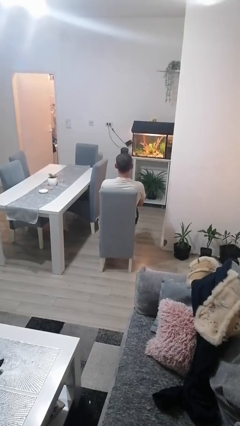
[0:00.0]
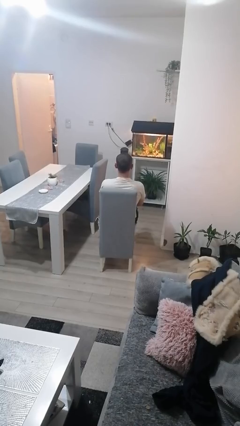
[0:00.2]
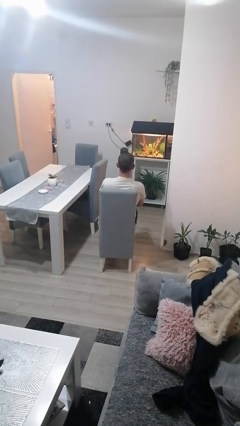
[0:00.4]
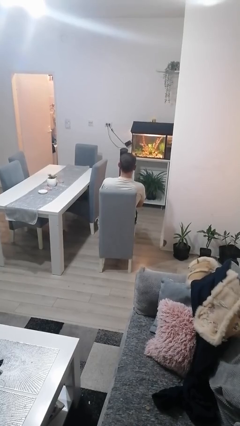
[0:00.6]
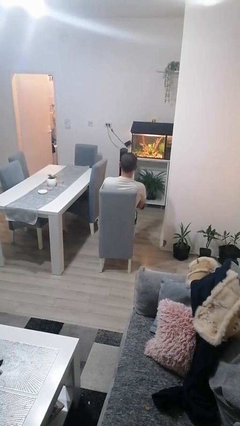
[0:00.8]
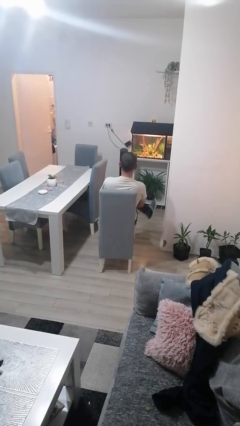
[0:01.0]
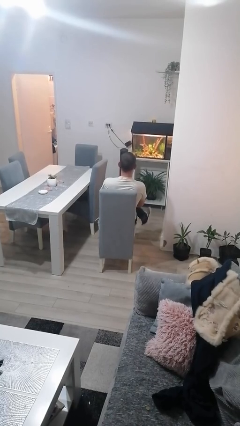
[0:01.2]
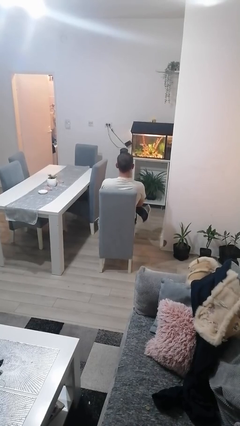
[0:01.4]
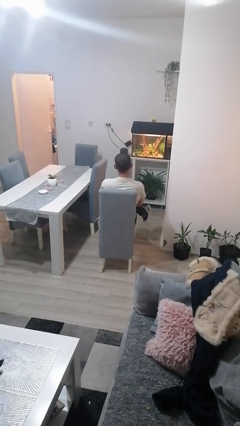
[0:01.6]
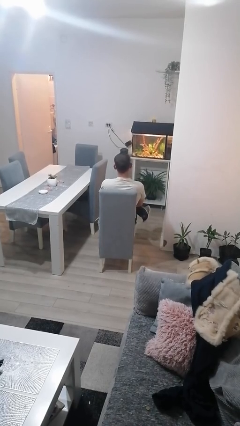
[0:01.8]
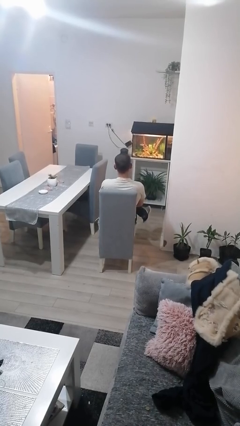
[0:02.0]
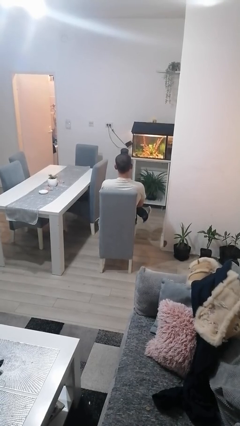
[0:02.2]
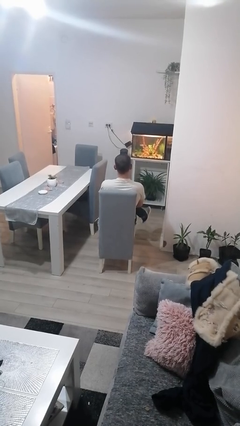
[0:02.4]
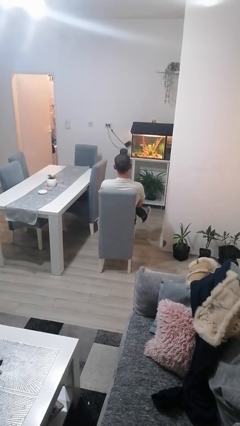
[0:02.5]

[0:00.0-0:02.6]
person crosses legs

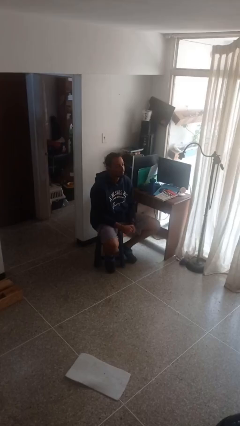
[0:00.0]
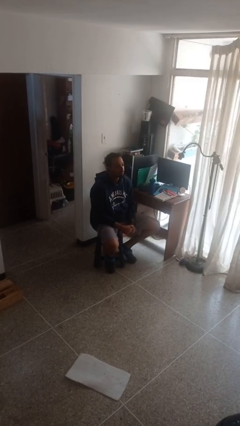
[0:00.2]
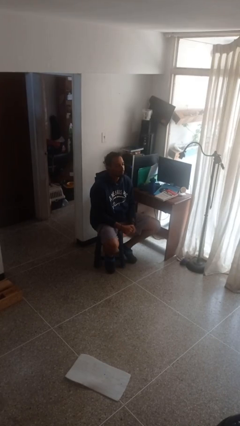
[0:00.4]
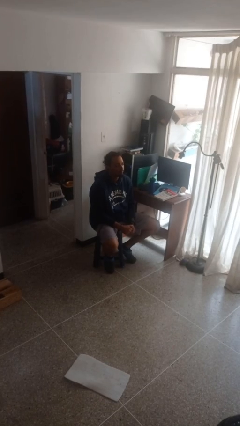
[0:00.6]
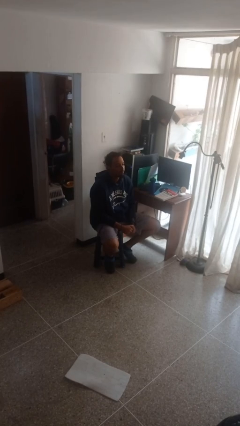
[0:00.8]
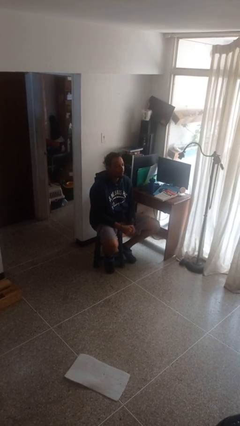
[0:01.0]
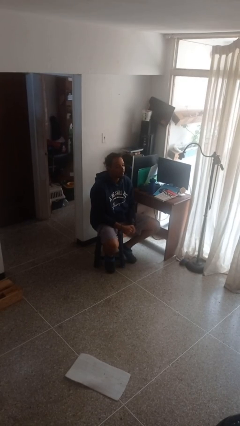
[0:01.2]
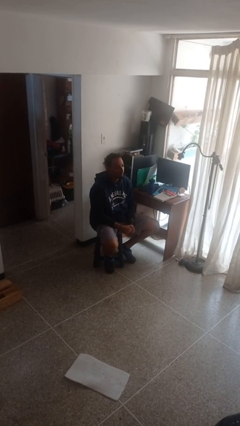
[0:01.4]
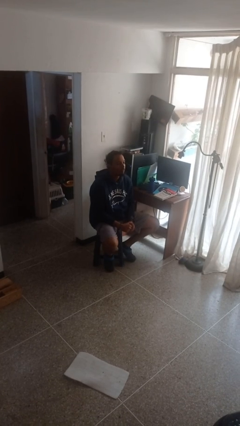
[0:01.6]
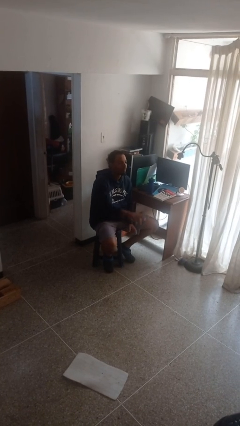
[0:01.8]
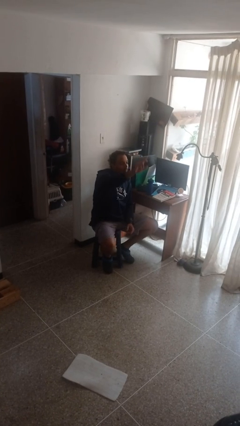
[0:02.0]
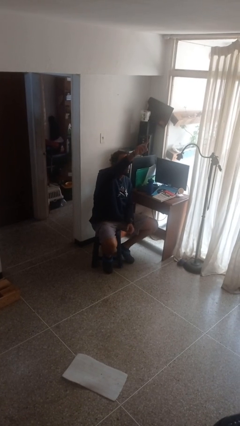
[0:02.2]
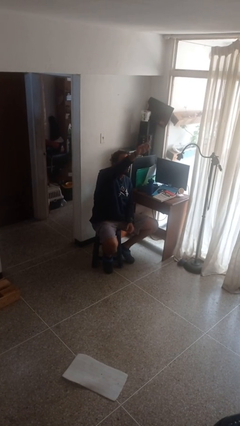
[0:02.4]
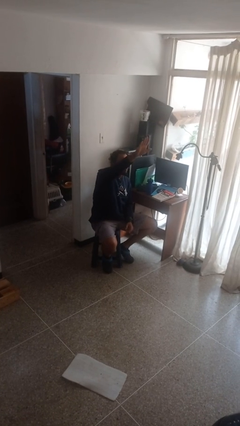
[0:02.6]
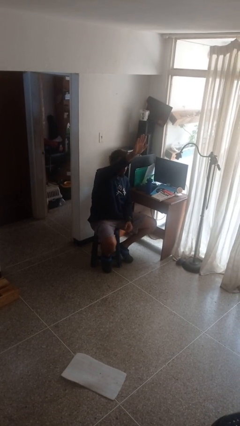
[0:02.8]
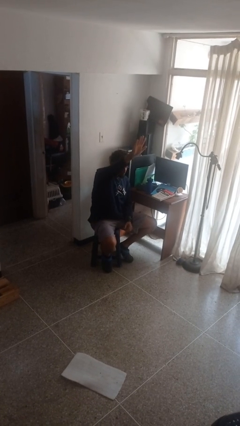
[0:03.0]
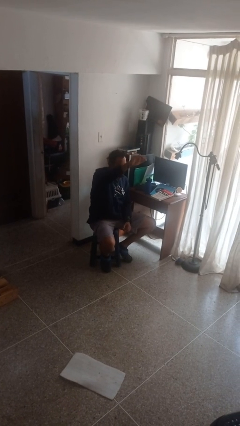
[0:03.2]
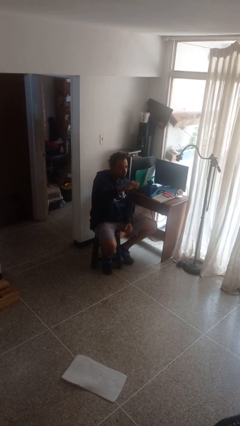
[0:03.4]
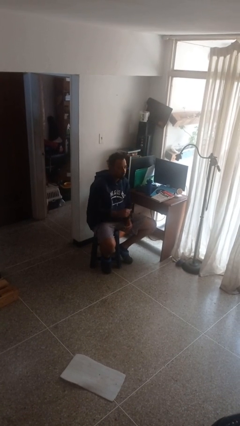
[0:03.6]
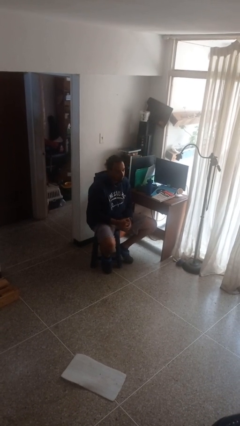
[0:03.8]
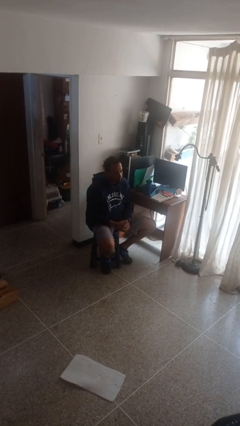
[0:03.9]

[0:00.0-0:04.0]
person gestures raise hand

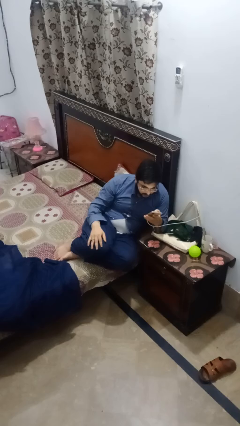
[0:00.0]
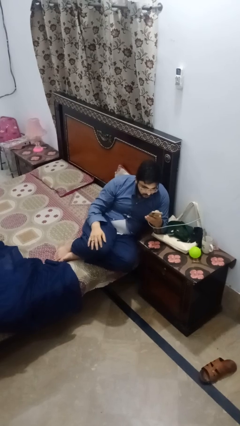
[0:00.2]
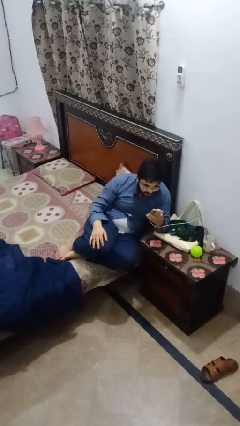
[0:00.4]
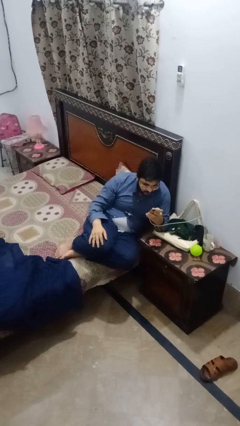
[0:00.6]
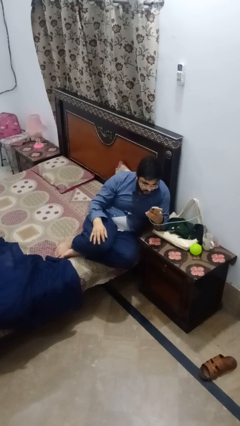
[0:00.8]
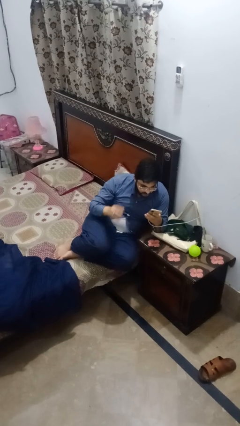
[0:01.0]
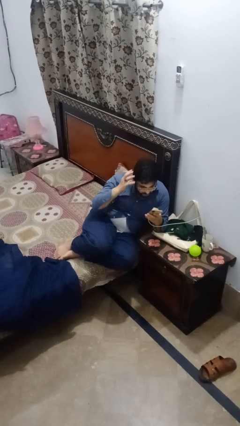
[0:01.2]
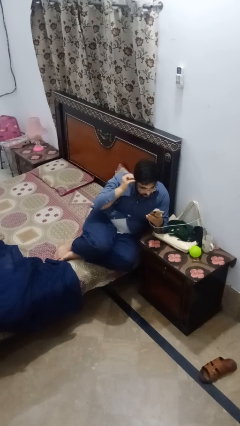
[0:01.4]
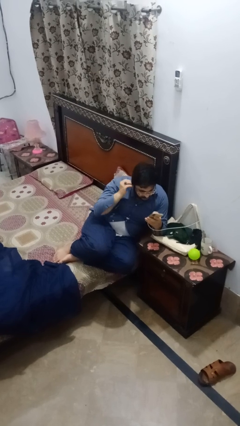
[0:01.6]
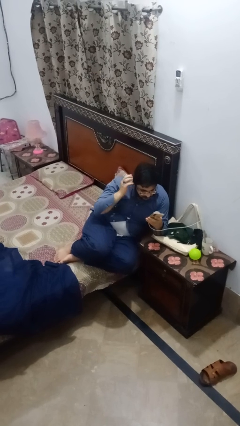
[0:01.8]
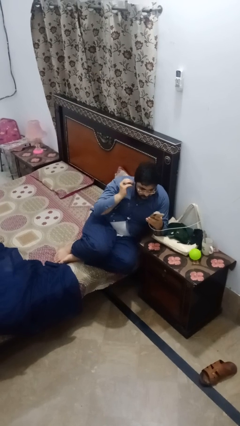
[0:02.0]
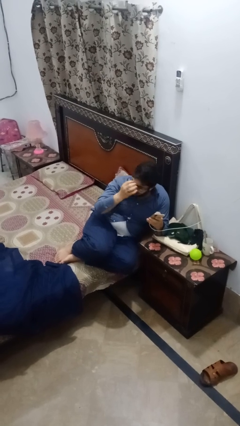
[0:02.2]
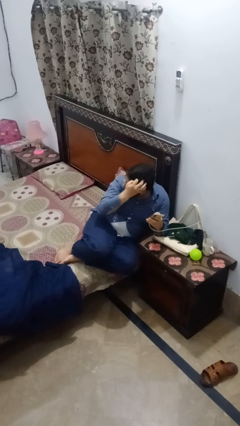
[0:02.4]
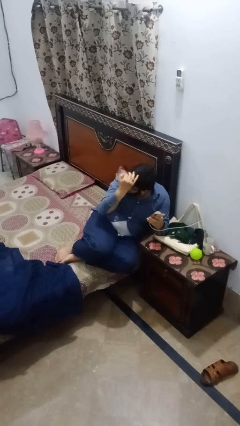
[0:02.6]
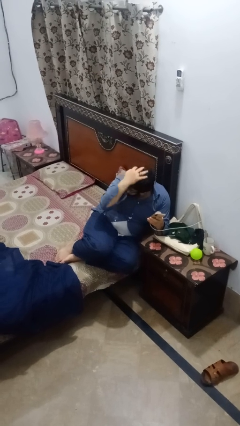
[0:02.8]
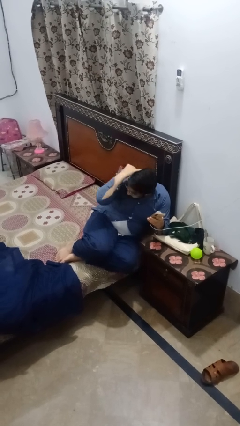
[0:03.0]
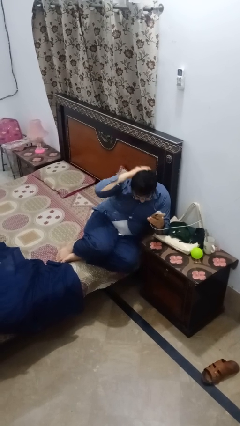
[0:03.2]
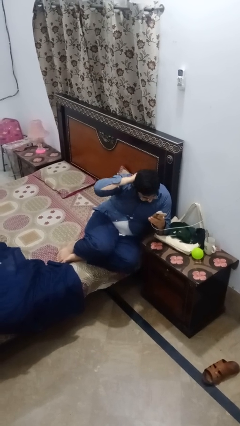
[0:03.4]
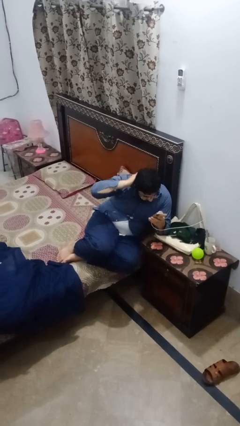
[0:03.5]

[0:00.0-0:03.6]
person strokes hair

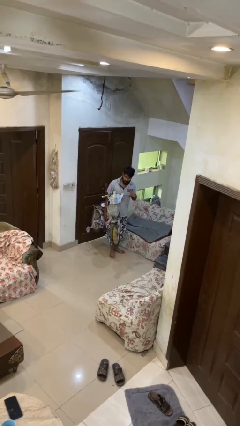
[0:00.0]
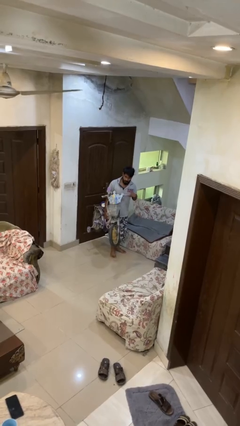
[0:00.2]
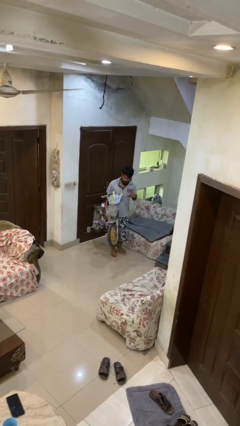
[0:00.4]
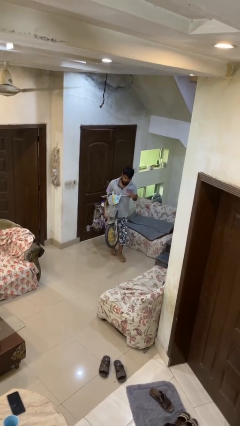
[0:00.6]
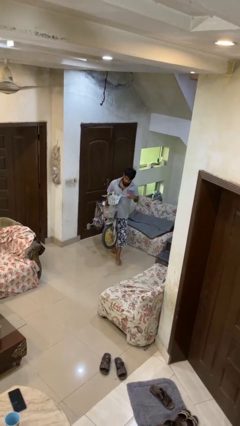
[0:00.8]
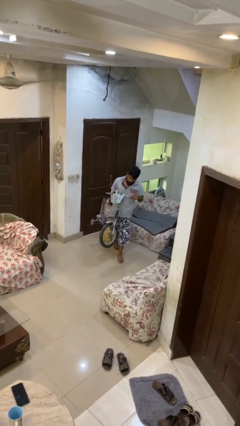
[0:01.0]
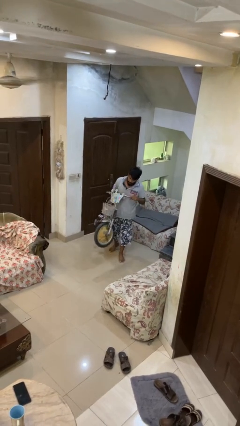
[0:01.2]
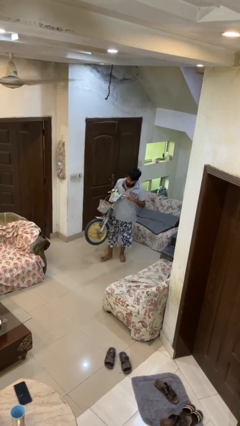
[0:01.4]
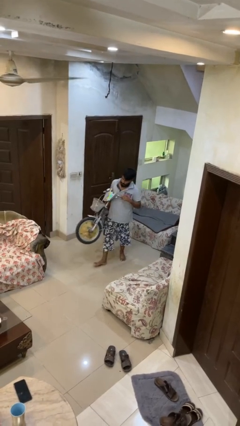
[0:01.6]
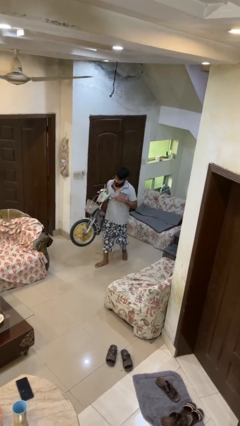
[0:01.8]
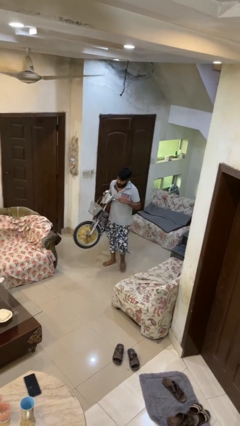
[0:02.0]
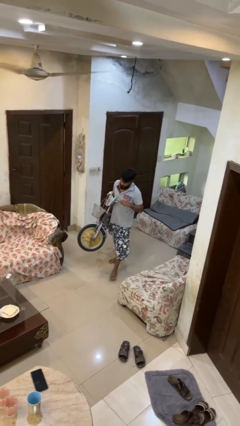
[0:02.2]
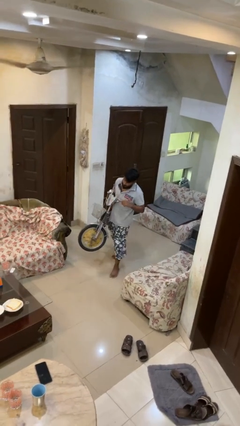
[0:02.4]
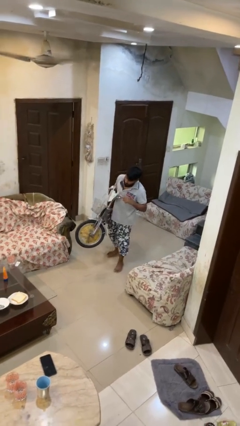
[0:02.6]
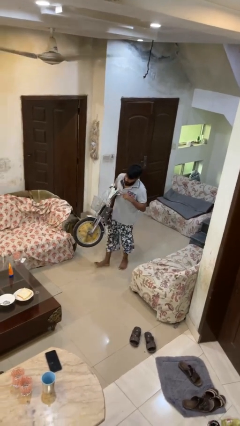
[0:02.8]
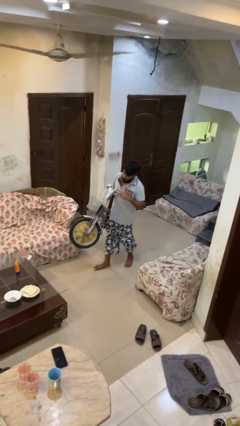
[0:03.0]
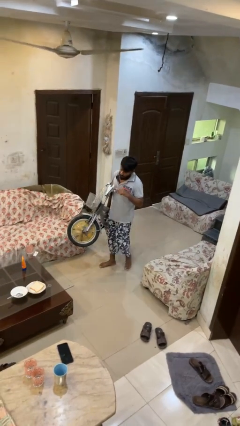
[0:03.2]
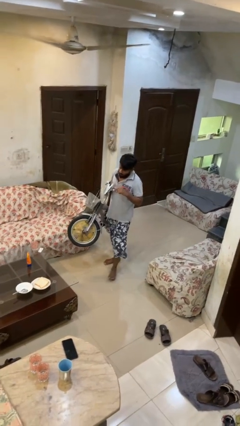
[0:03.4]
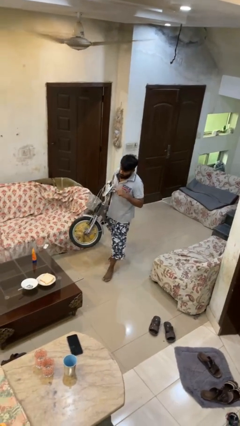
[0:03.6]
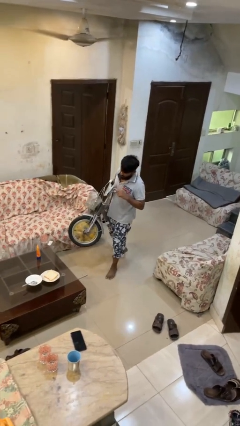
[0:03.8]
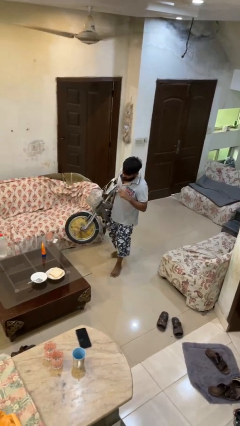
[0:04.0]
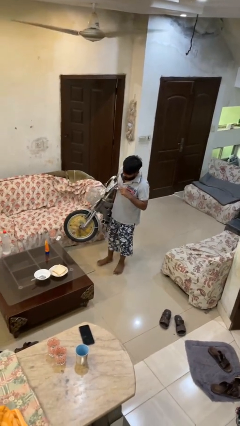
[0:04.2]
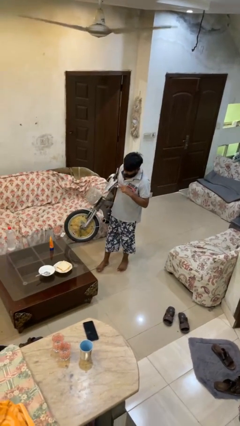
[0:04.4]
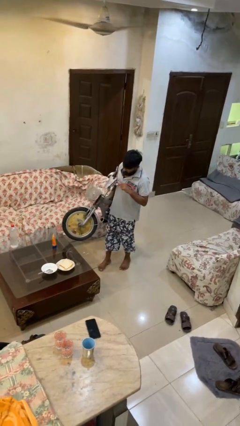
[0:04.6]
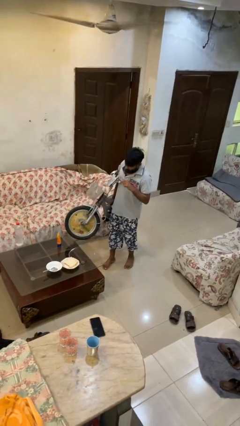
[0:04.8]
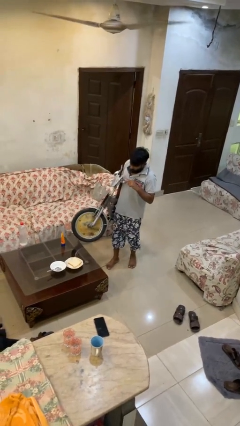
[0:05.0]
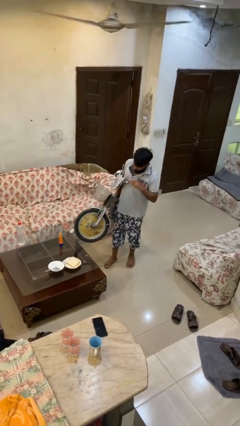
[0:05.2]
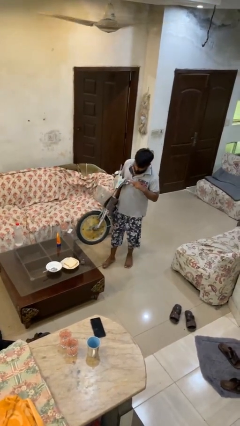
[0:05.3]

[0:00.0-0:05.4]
person carries bicycle

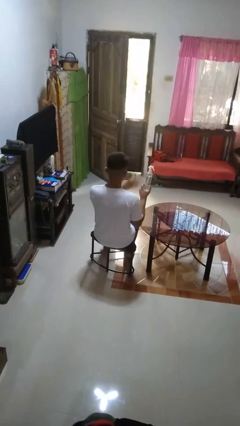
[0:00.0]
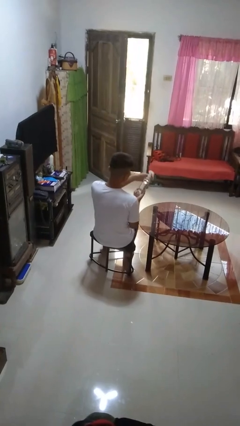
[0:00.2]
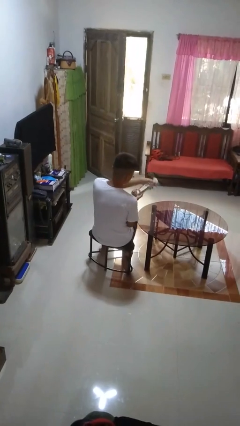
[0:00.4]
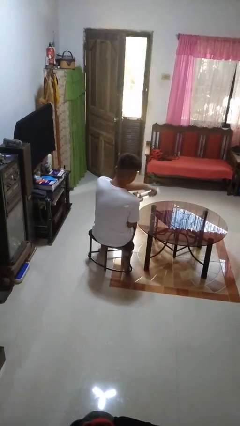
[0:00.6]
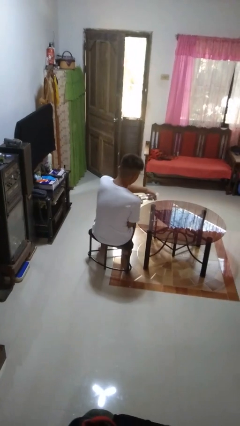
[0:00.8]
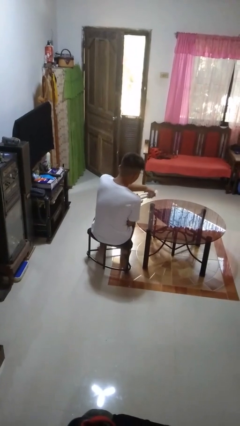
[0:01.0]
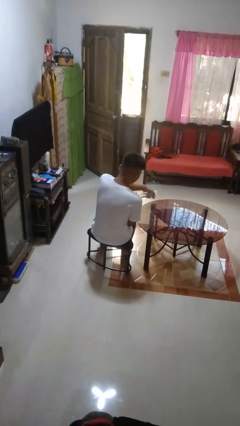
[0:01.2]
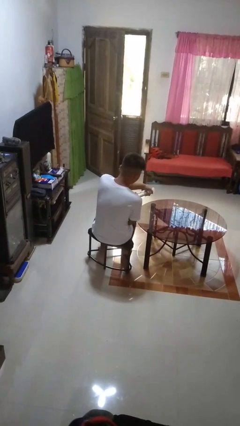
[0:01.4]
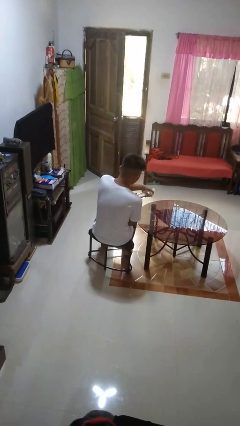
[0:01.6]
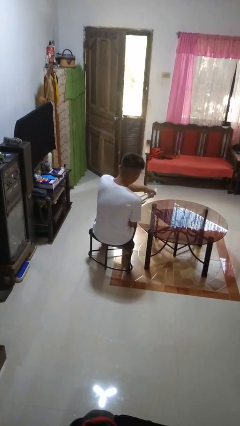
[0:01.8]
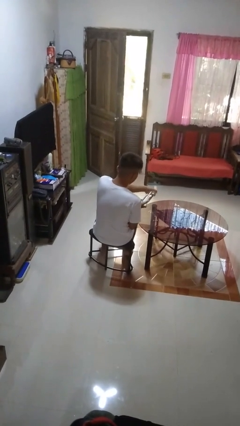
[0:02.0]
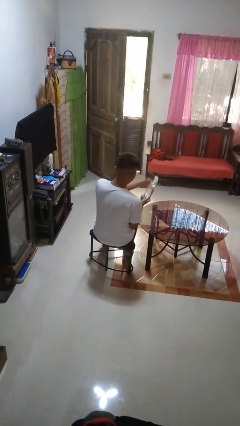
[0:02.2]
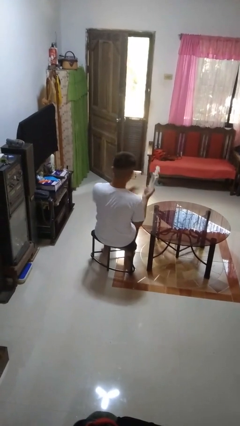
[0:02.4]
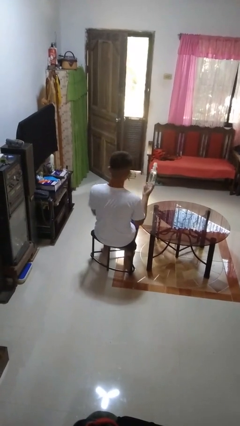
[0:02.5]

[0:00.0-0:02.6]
person sprays from bottle
